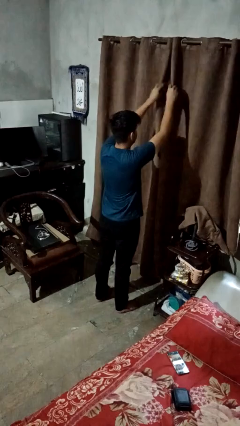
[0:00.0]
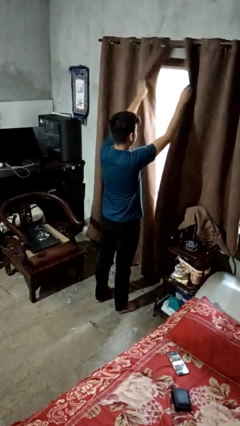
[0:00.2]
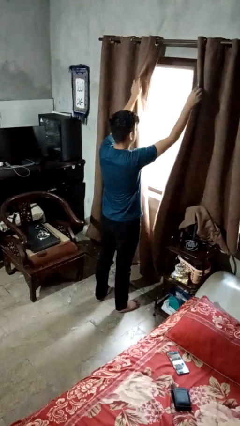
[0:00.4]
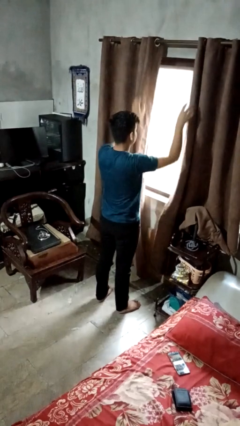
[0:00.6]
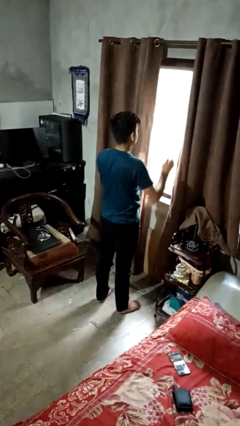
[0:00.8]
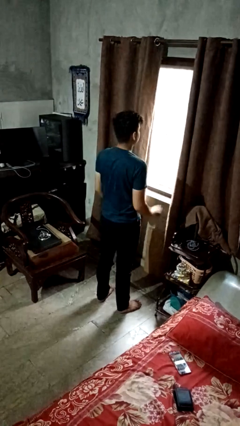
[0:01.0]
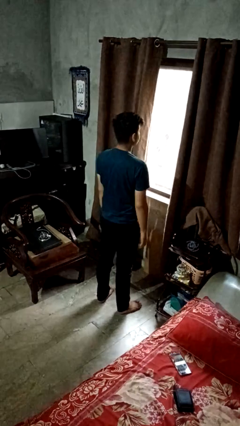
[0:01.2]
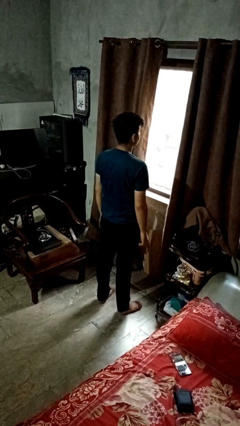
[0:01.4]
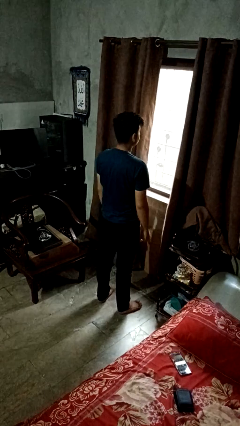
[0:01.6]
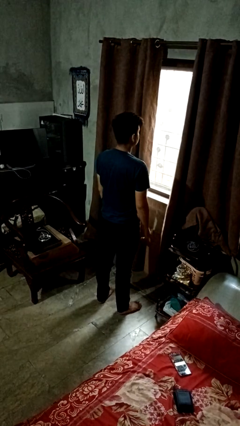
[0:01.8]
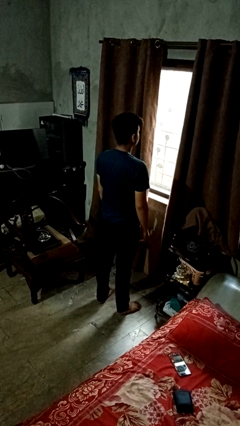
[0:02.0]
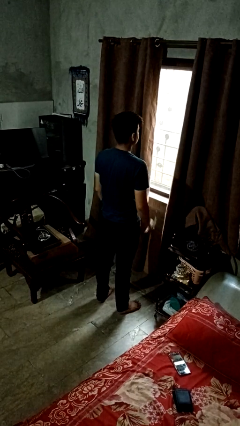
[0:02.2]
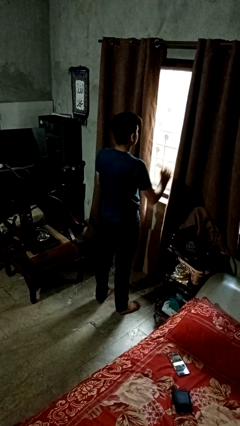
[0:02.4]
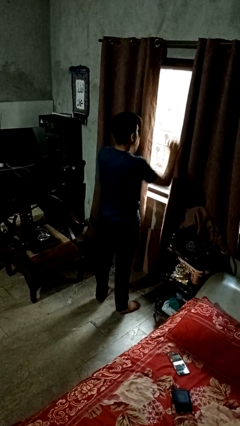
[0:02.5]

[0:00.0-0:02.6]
person opens curtains

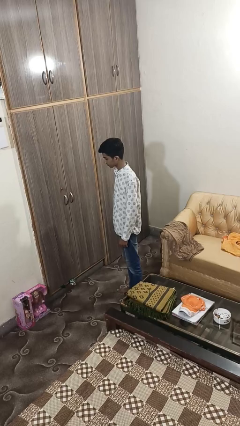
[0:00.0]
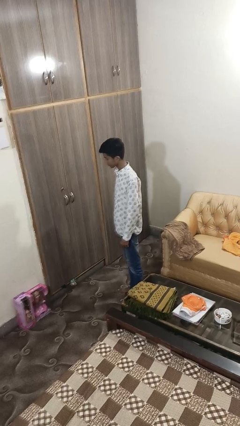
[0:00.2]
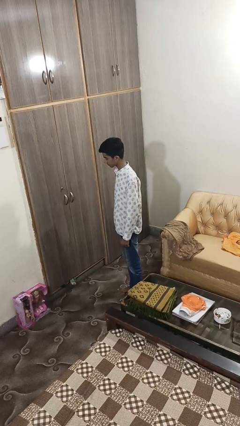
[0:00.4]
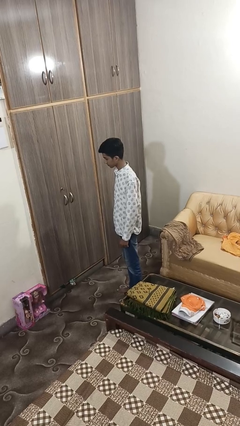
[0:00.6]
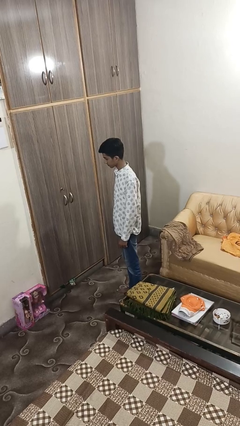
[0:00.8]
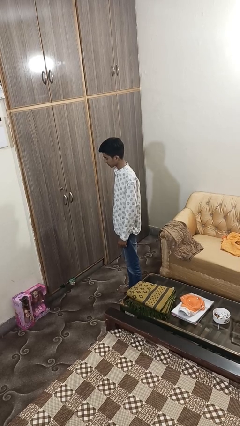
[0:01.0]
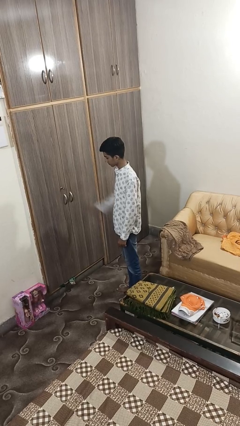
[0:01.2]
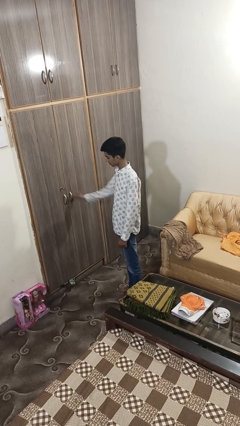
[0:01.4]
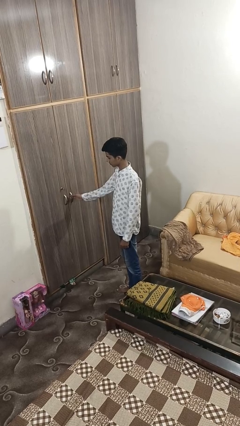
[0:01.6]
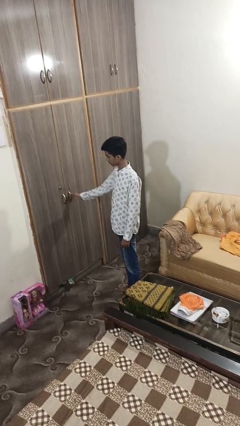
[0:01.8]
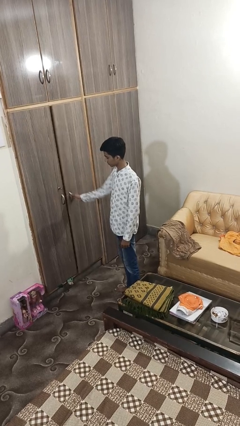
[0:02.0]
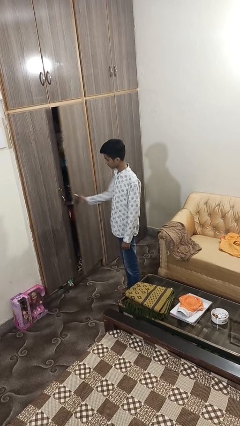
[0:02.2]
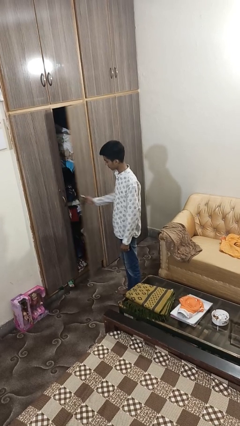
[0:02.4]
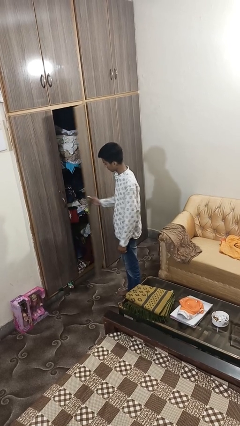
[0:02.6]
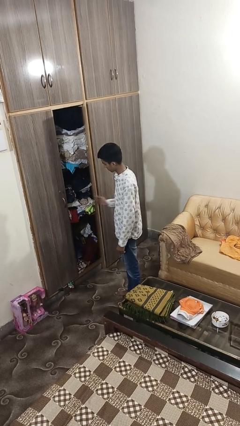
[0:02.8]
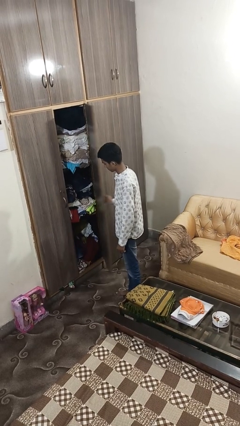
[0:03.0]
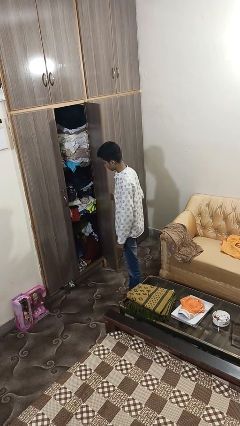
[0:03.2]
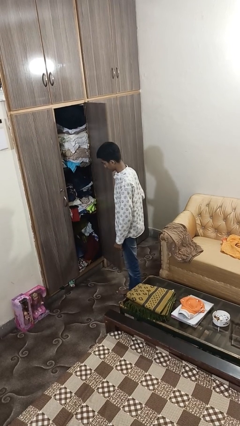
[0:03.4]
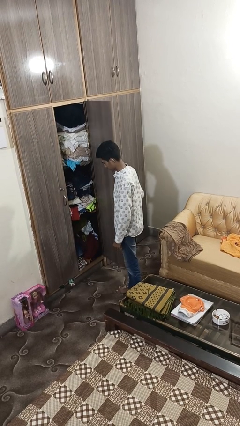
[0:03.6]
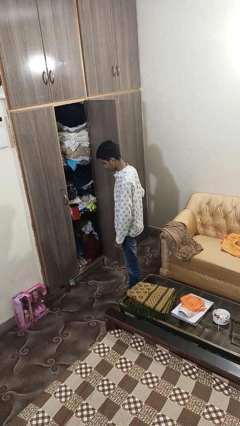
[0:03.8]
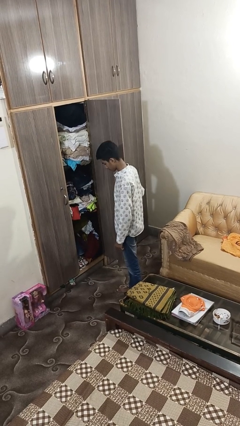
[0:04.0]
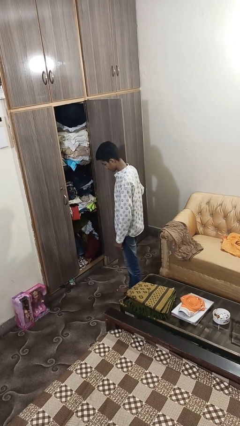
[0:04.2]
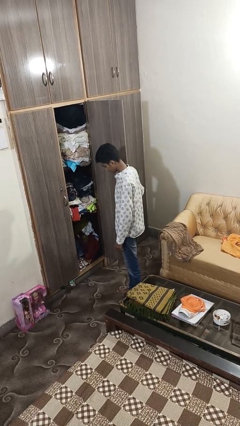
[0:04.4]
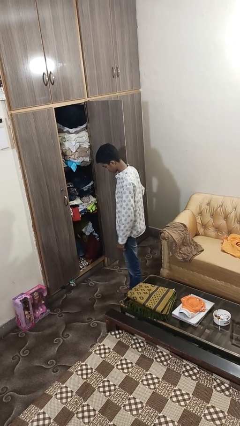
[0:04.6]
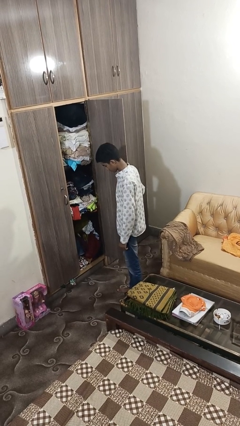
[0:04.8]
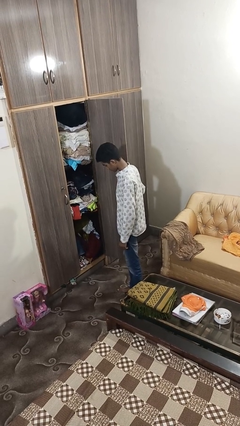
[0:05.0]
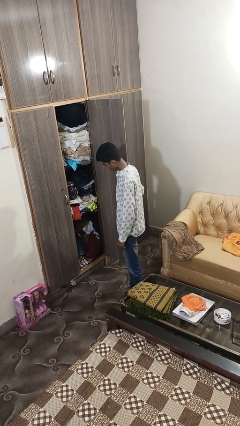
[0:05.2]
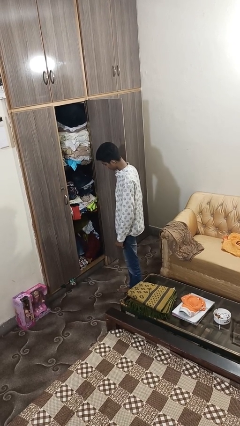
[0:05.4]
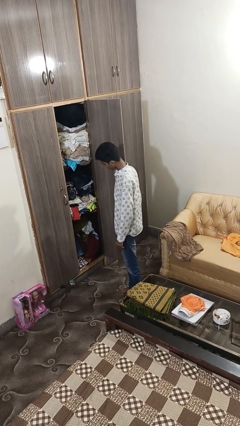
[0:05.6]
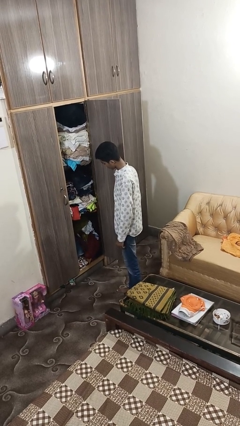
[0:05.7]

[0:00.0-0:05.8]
person opens closet door

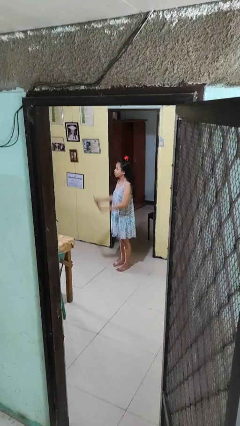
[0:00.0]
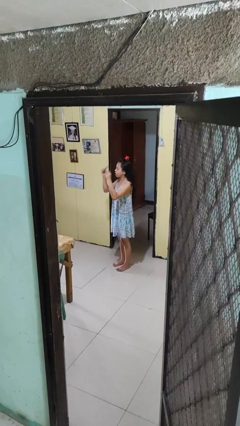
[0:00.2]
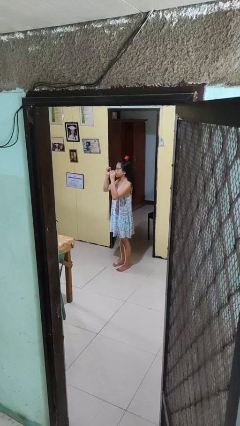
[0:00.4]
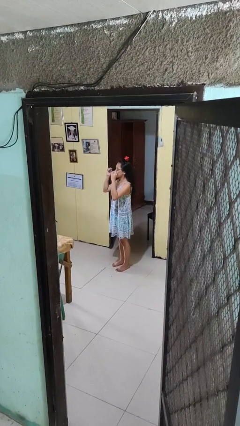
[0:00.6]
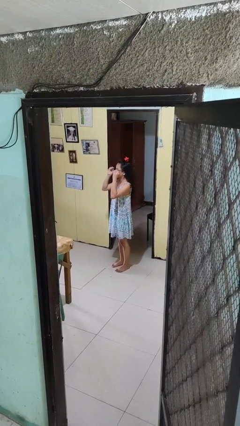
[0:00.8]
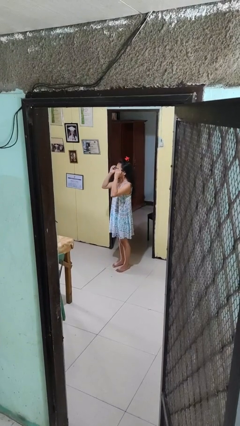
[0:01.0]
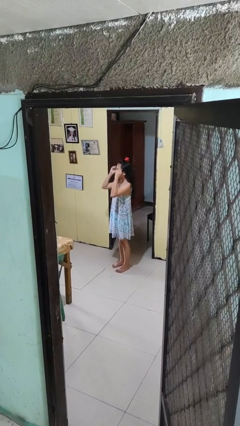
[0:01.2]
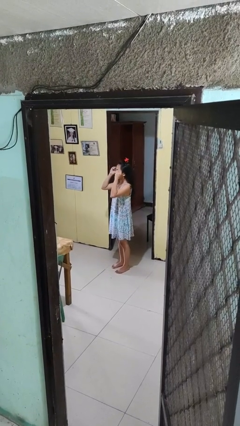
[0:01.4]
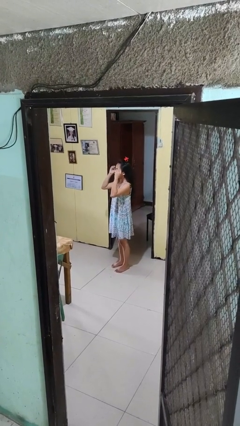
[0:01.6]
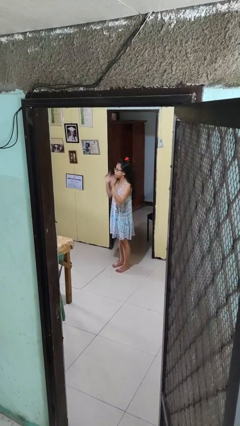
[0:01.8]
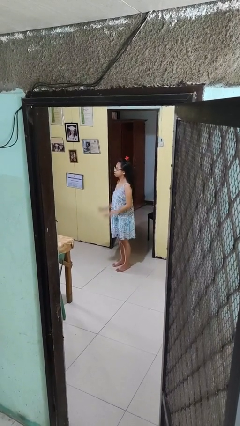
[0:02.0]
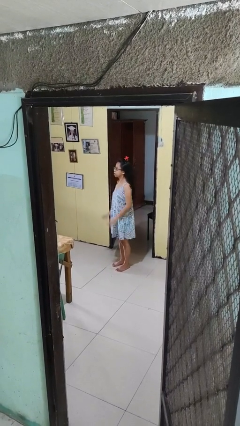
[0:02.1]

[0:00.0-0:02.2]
person puts on glasses

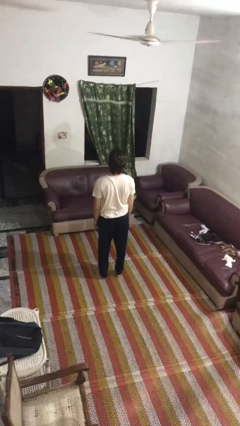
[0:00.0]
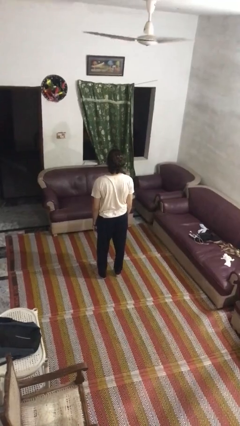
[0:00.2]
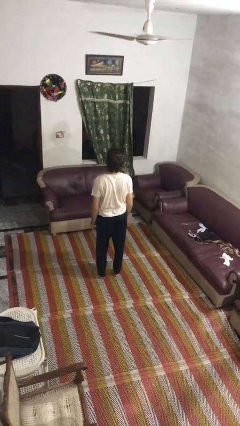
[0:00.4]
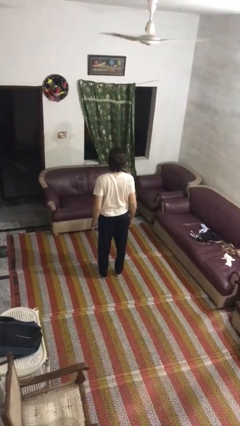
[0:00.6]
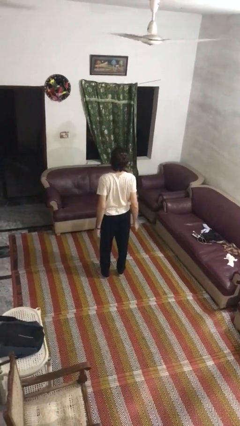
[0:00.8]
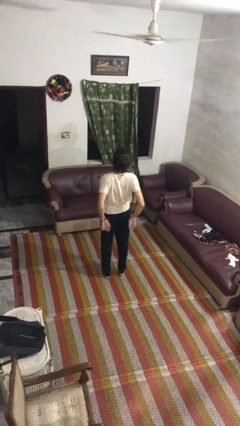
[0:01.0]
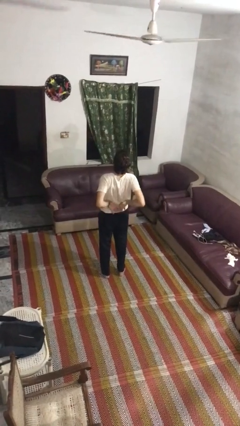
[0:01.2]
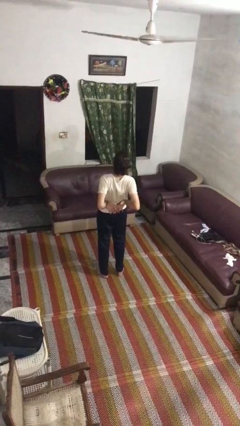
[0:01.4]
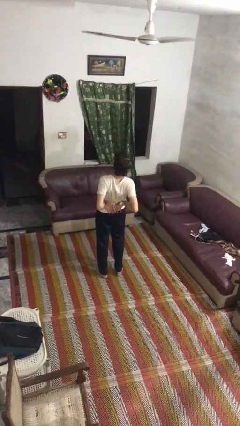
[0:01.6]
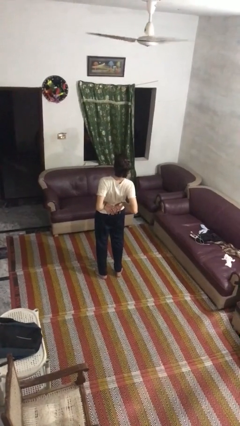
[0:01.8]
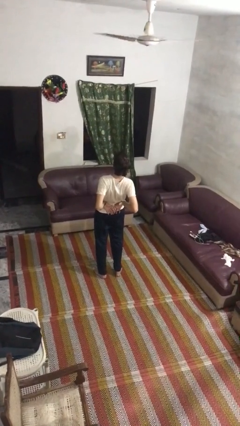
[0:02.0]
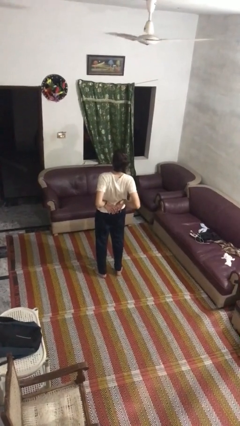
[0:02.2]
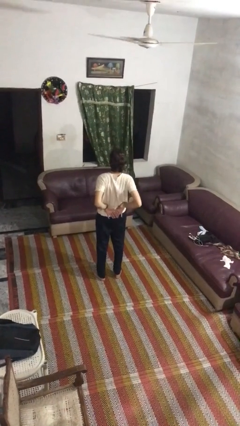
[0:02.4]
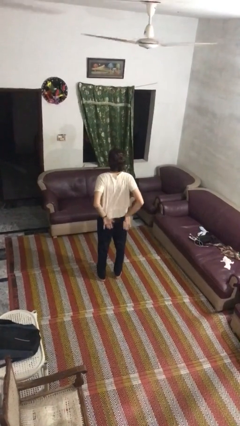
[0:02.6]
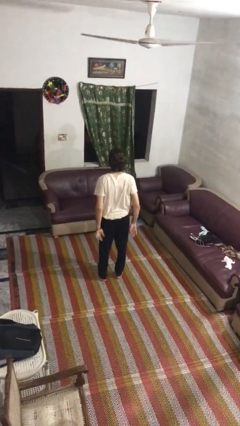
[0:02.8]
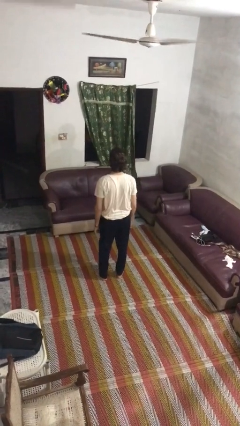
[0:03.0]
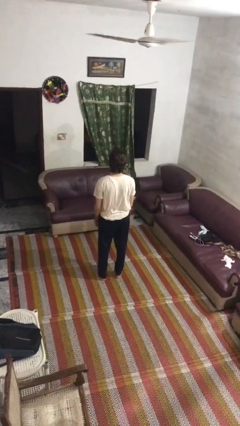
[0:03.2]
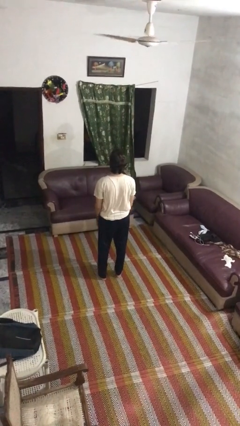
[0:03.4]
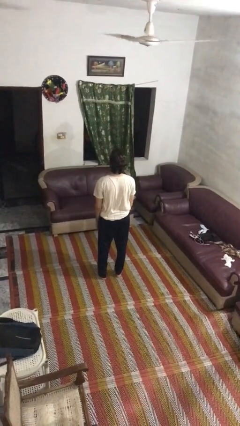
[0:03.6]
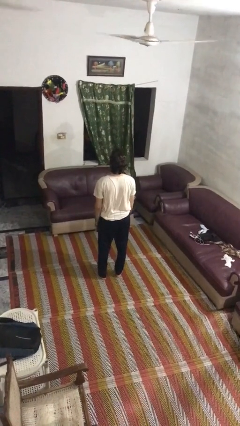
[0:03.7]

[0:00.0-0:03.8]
person stretches back

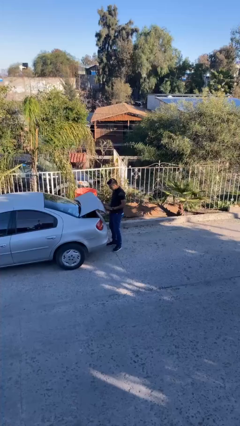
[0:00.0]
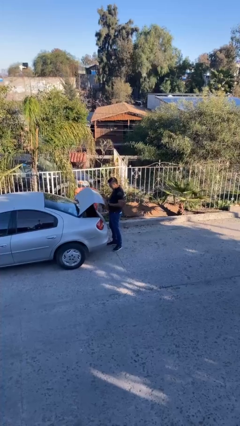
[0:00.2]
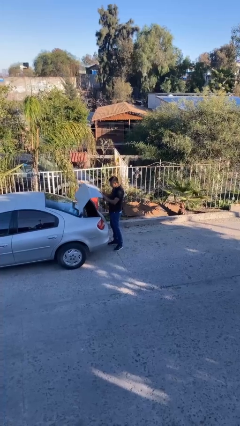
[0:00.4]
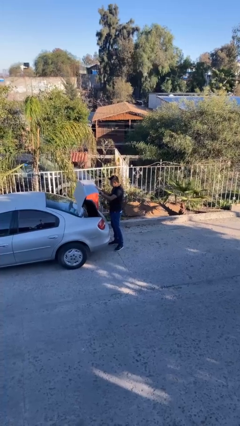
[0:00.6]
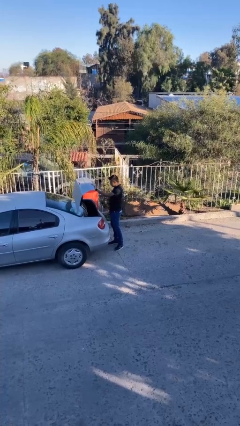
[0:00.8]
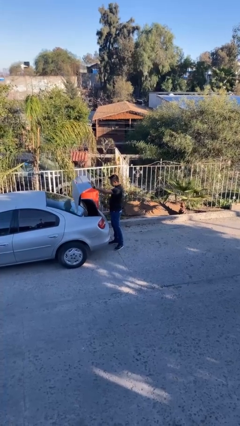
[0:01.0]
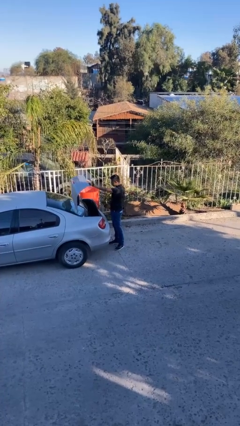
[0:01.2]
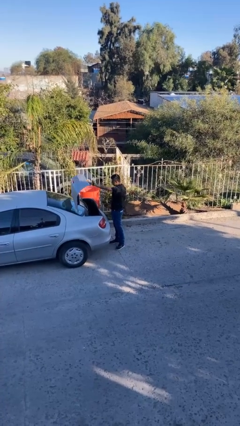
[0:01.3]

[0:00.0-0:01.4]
person opens car trunk

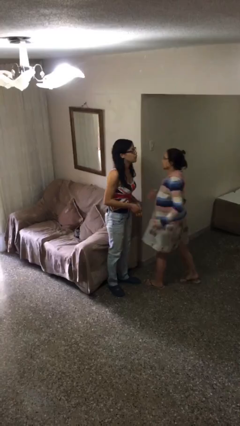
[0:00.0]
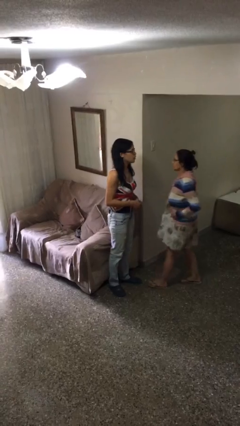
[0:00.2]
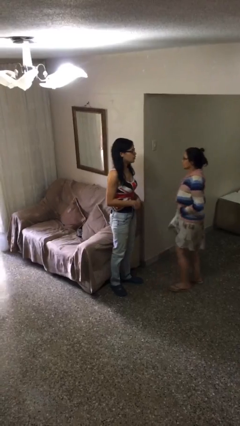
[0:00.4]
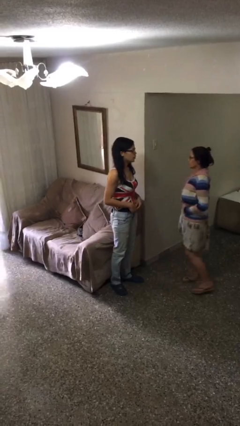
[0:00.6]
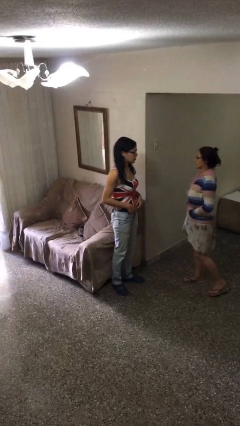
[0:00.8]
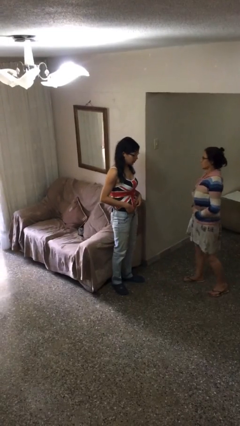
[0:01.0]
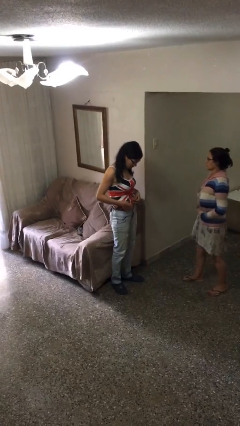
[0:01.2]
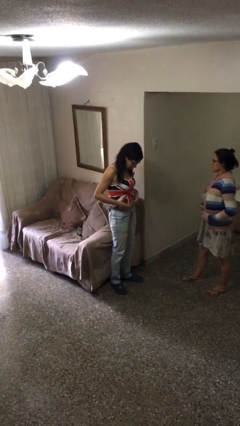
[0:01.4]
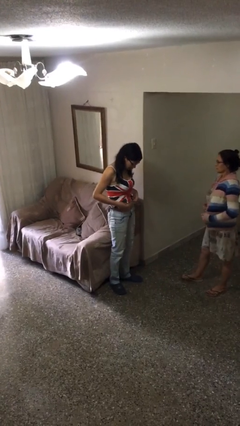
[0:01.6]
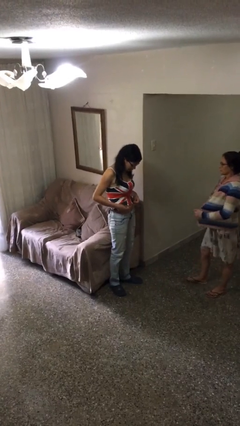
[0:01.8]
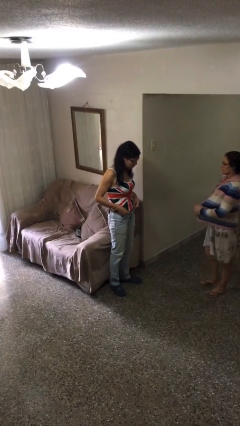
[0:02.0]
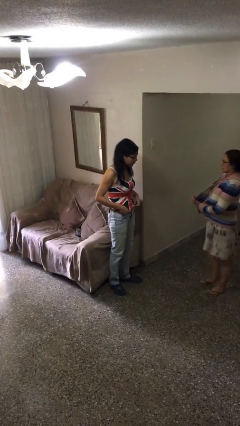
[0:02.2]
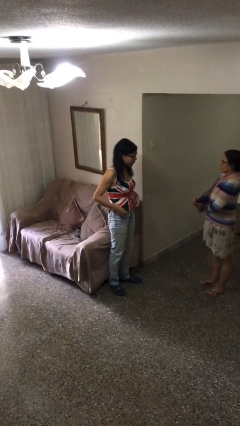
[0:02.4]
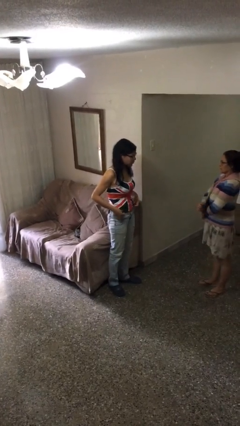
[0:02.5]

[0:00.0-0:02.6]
person talks to person
